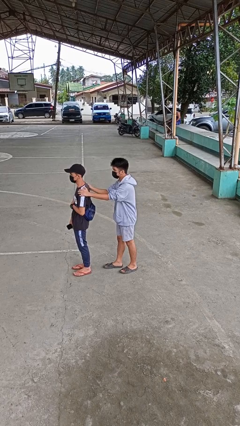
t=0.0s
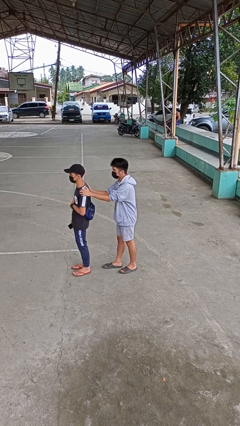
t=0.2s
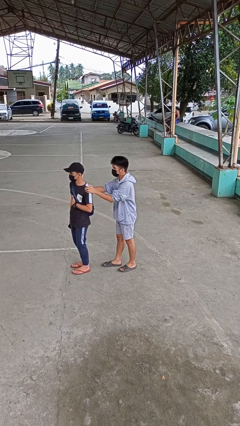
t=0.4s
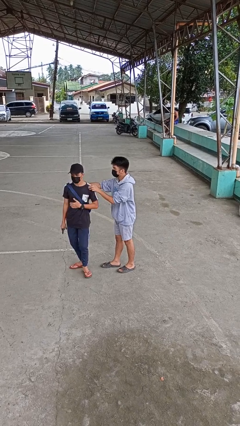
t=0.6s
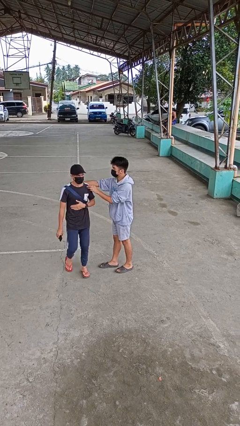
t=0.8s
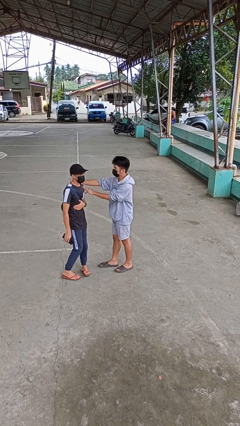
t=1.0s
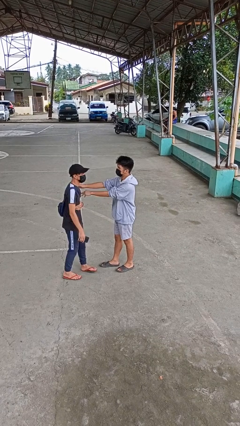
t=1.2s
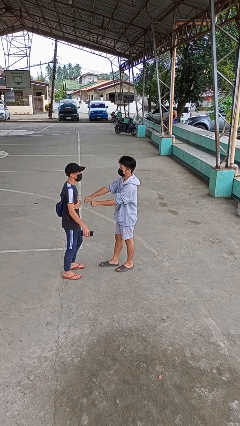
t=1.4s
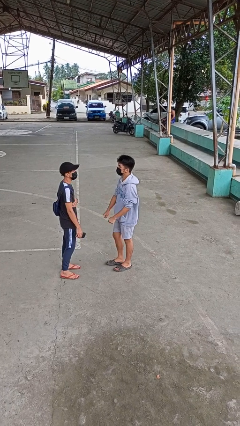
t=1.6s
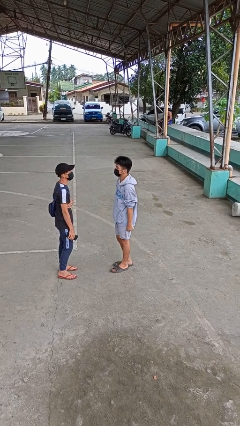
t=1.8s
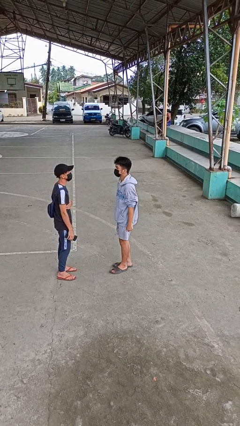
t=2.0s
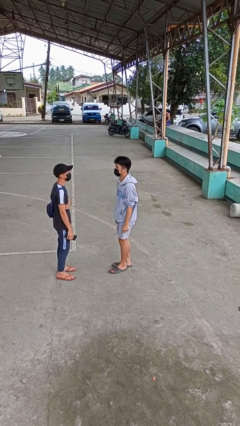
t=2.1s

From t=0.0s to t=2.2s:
person spins person around

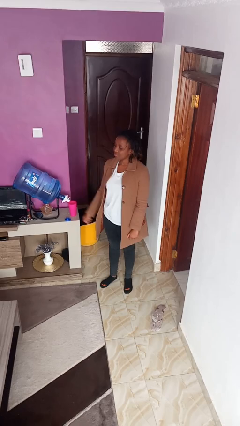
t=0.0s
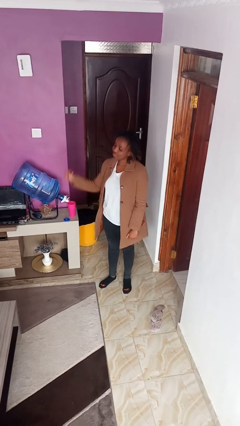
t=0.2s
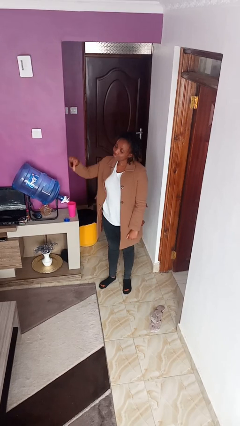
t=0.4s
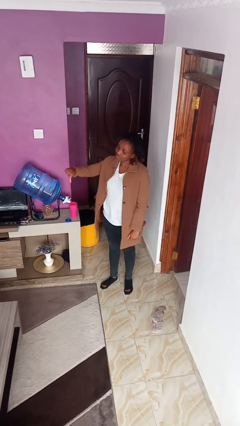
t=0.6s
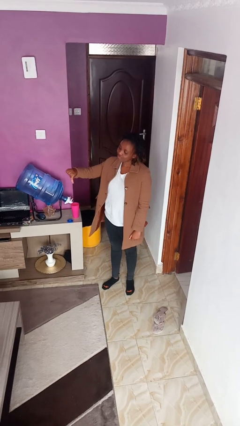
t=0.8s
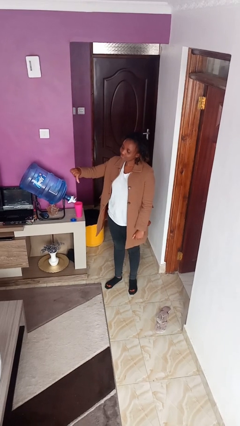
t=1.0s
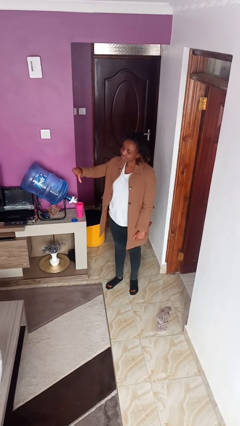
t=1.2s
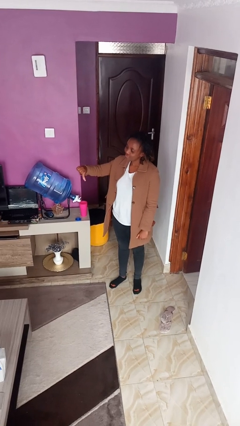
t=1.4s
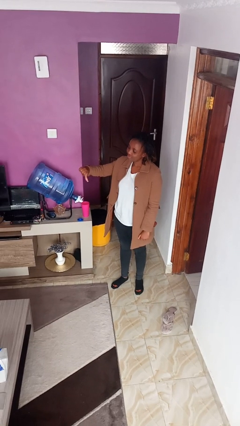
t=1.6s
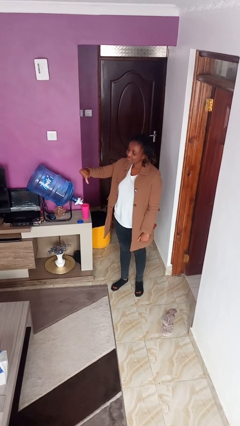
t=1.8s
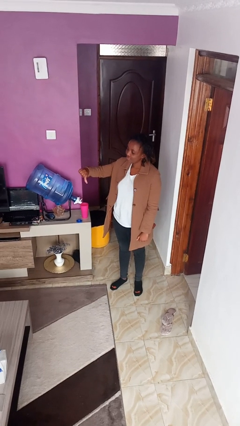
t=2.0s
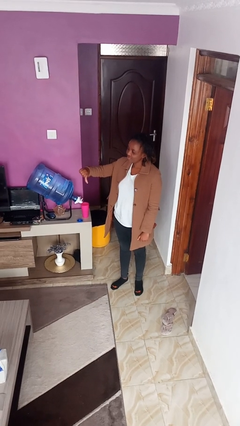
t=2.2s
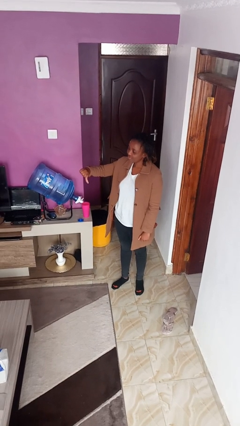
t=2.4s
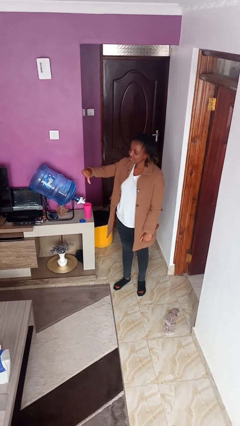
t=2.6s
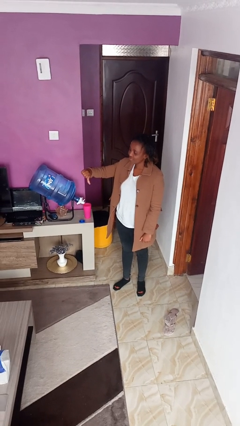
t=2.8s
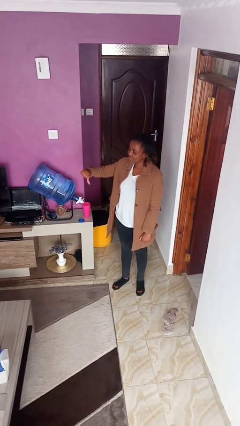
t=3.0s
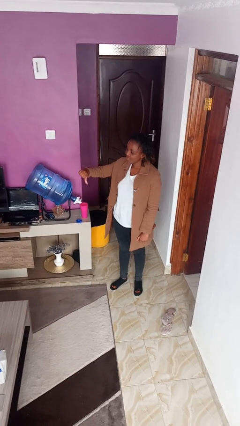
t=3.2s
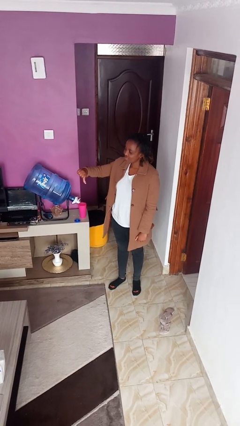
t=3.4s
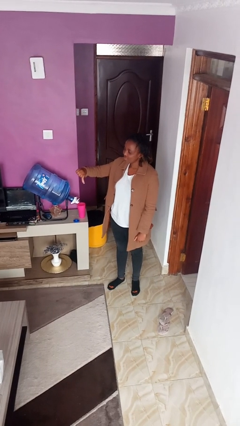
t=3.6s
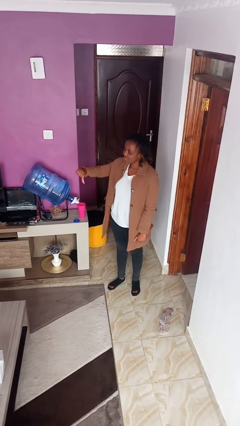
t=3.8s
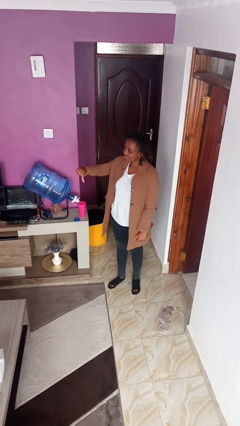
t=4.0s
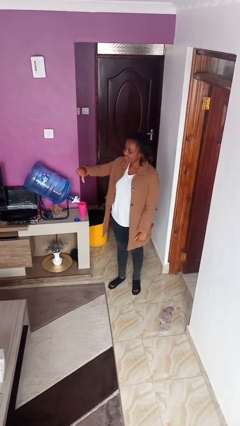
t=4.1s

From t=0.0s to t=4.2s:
person gestures thumbs down

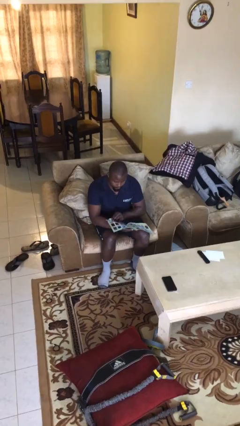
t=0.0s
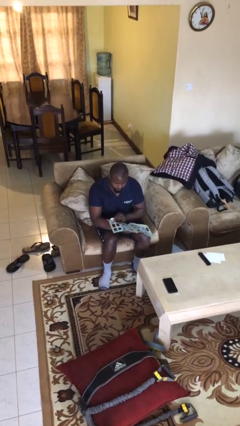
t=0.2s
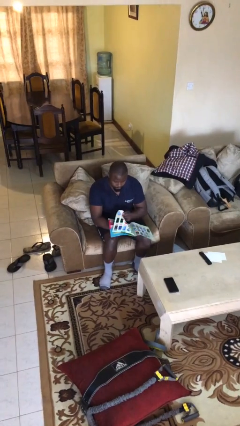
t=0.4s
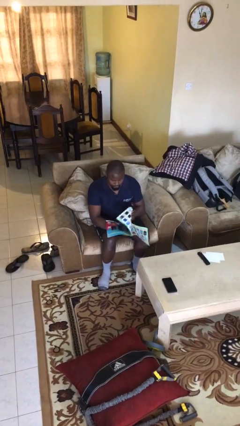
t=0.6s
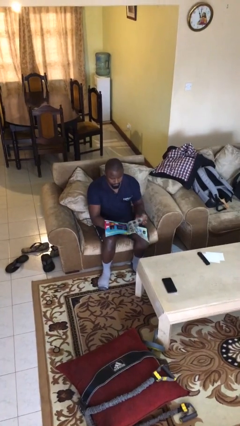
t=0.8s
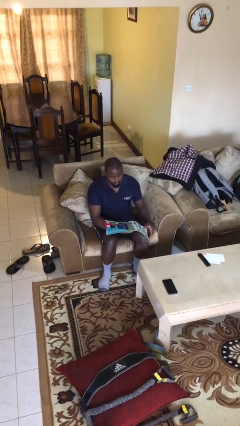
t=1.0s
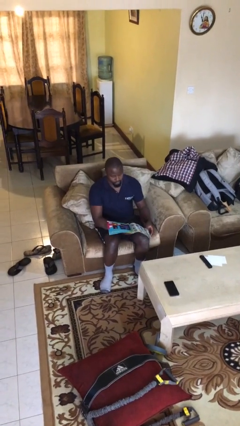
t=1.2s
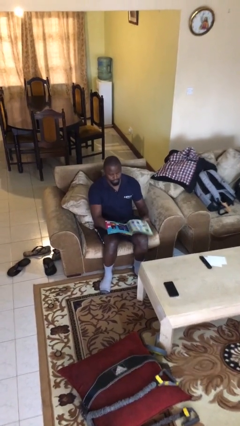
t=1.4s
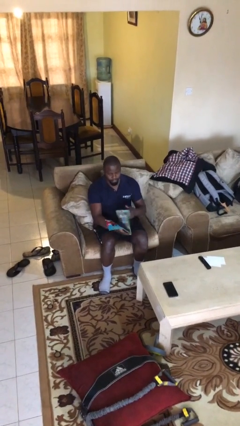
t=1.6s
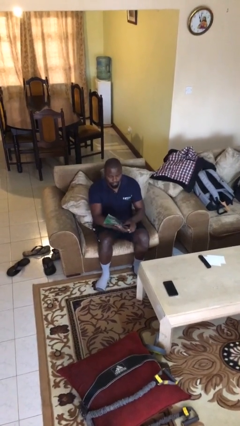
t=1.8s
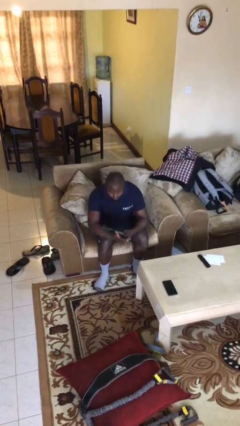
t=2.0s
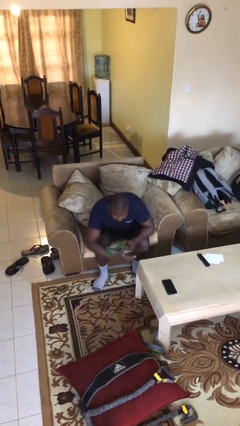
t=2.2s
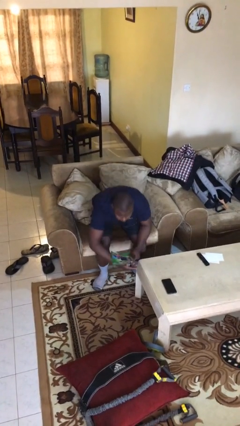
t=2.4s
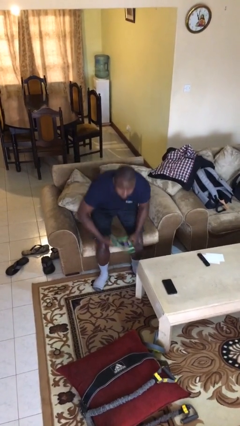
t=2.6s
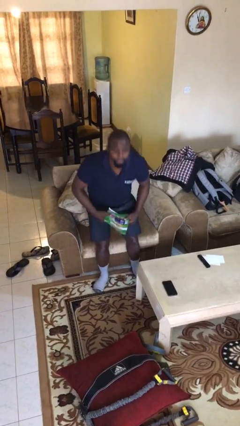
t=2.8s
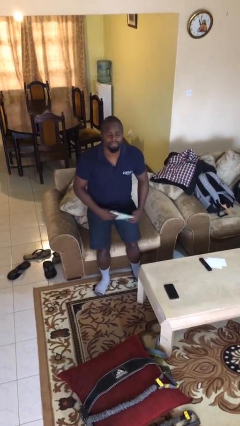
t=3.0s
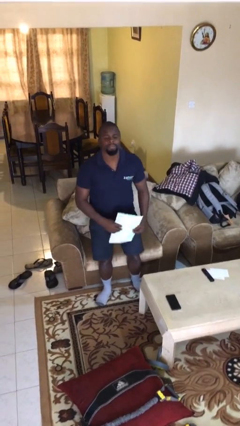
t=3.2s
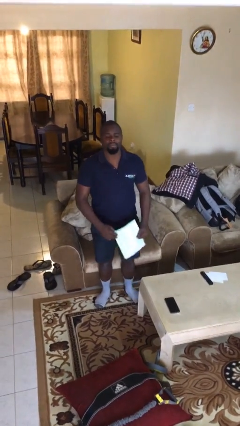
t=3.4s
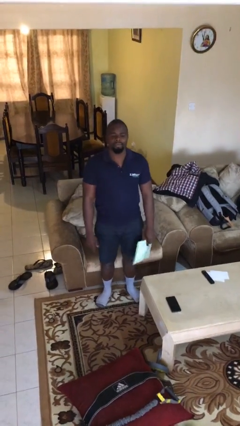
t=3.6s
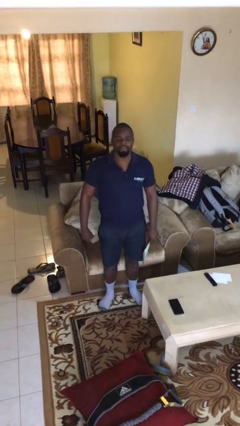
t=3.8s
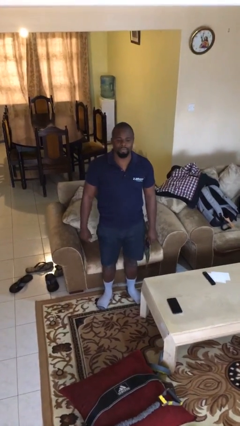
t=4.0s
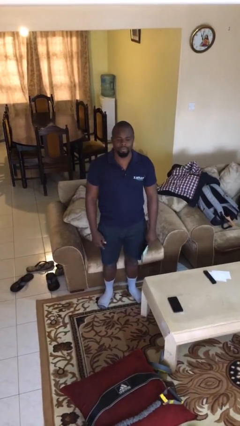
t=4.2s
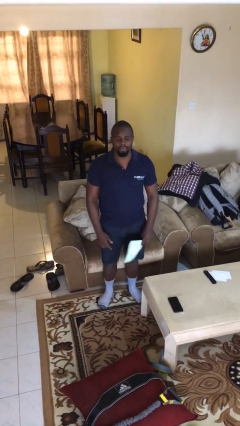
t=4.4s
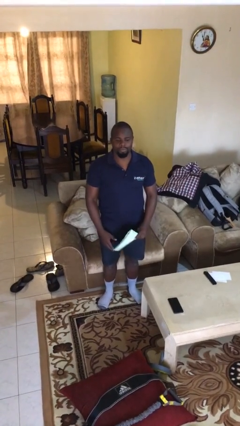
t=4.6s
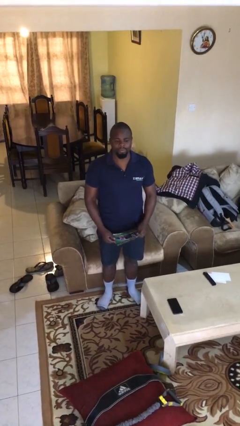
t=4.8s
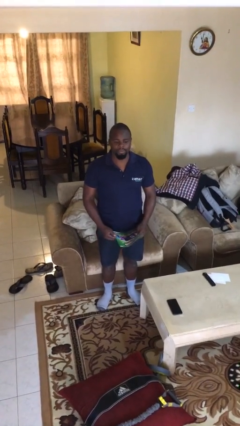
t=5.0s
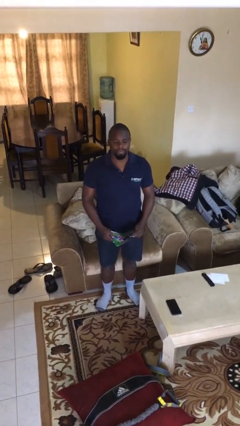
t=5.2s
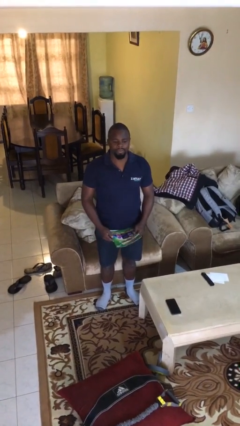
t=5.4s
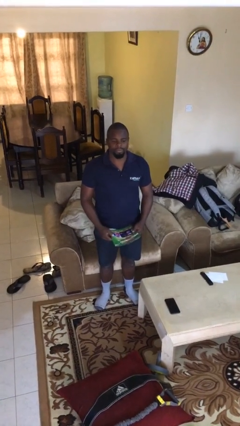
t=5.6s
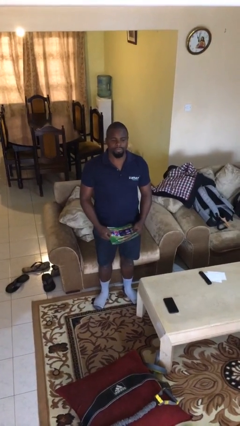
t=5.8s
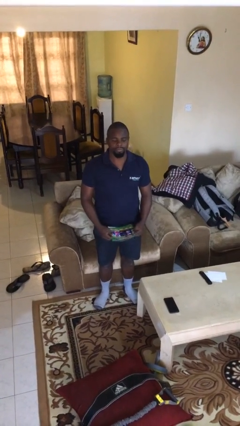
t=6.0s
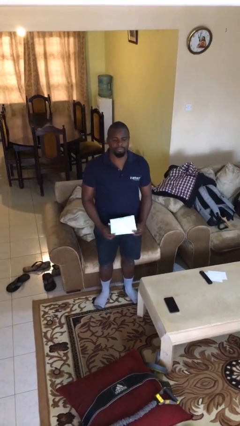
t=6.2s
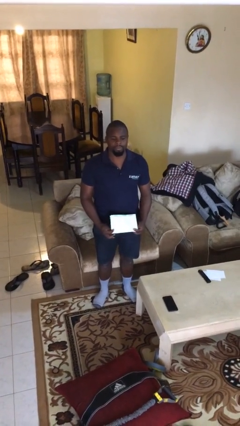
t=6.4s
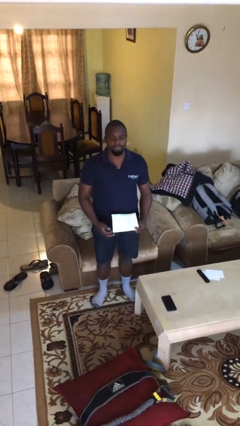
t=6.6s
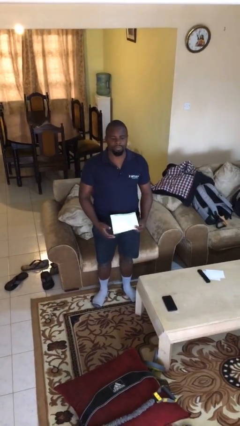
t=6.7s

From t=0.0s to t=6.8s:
person stands up

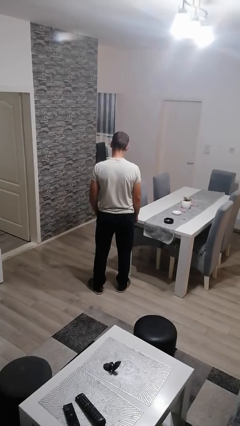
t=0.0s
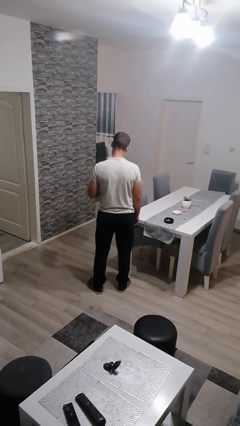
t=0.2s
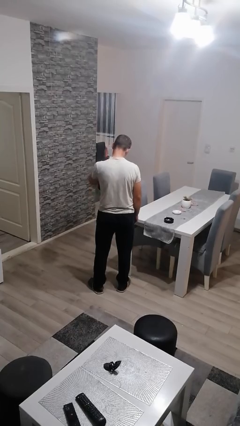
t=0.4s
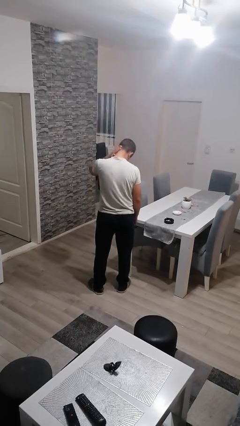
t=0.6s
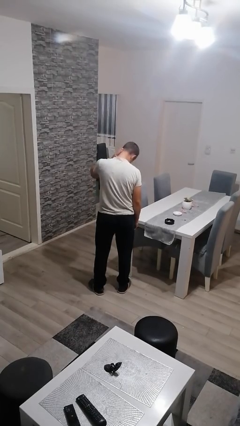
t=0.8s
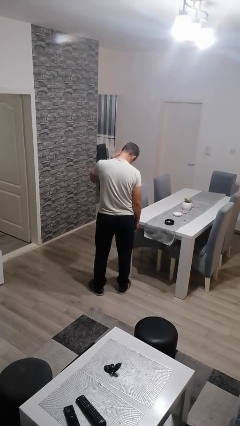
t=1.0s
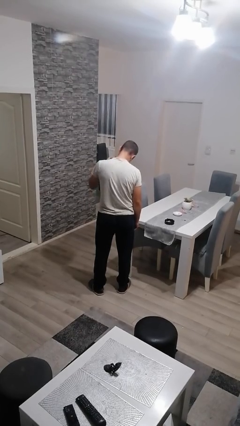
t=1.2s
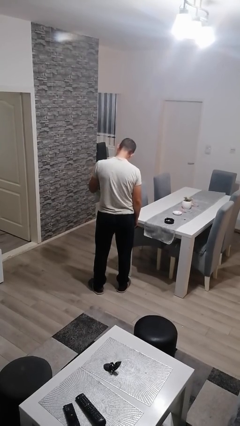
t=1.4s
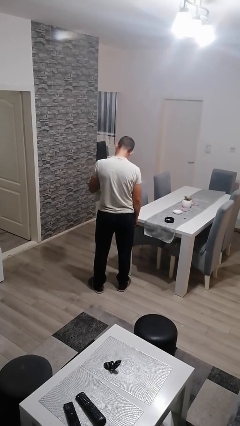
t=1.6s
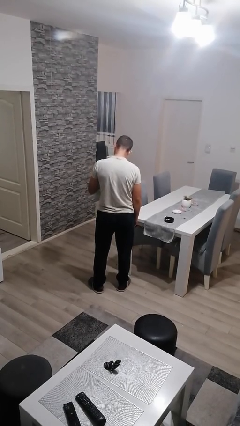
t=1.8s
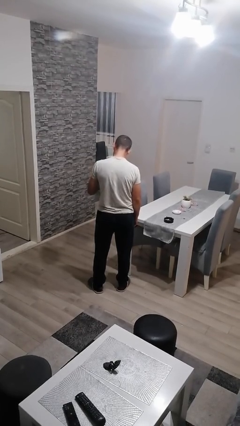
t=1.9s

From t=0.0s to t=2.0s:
person swats bug

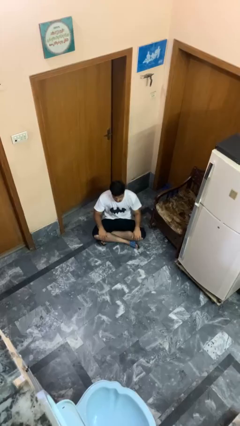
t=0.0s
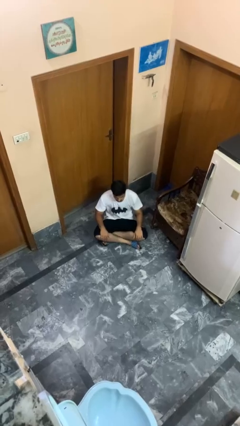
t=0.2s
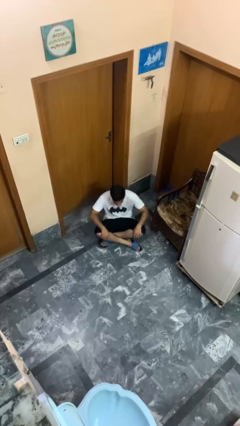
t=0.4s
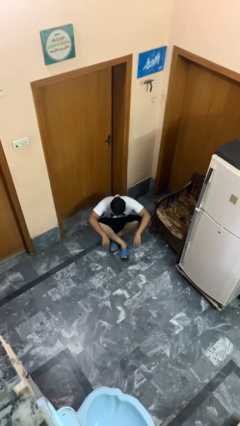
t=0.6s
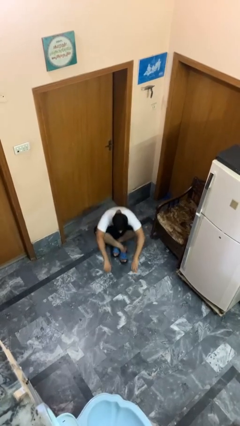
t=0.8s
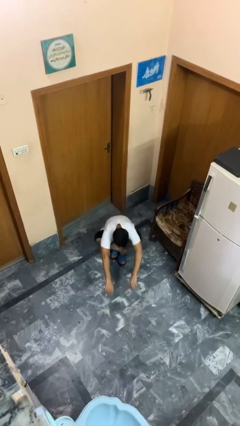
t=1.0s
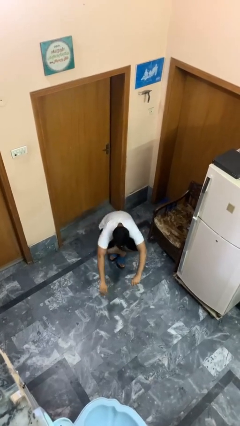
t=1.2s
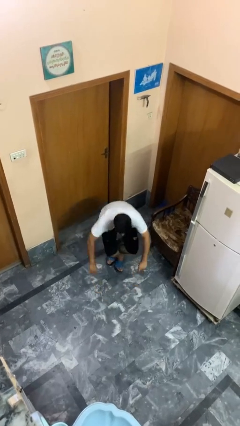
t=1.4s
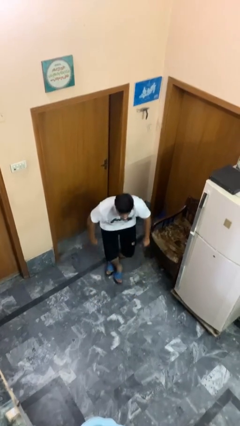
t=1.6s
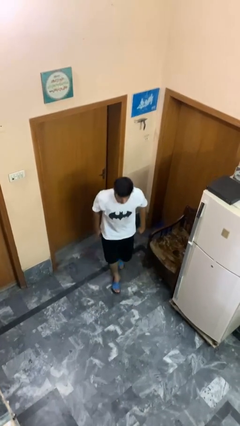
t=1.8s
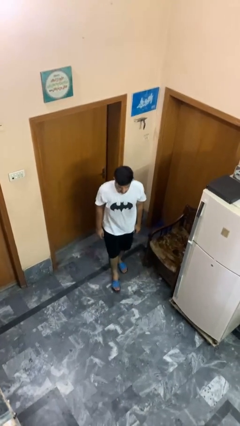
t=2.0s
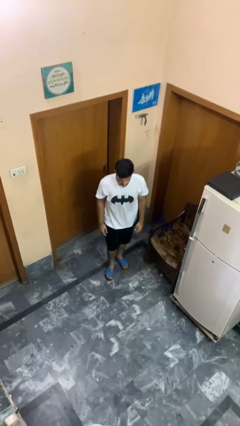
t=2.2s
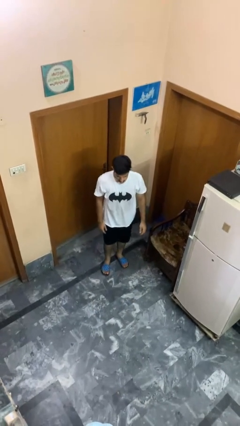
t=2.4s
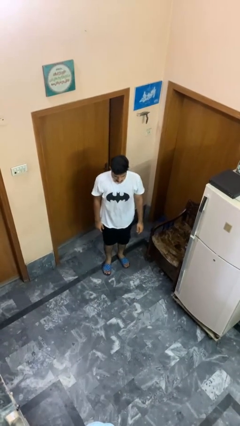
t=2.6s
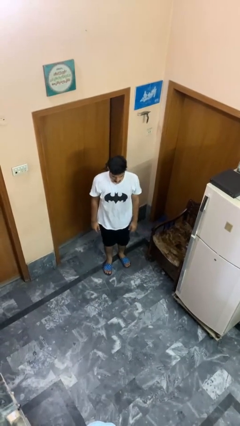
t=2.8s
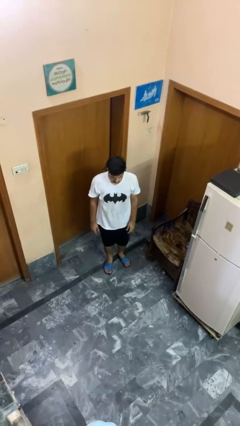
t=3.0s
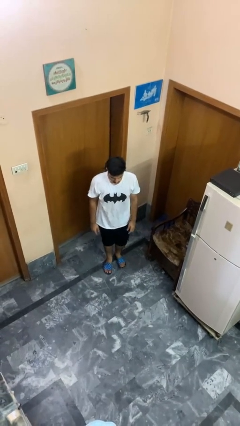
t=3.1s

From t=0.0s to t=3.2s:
person stands up from floor
